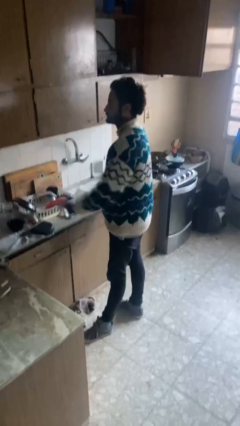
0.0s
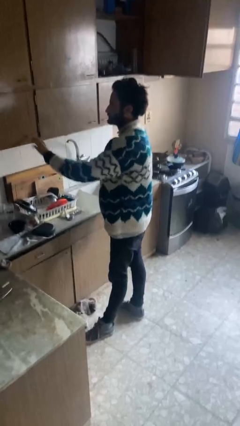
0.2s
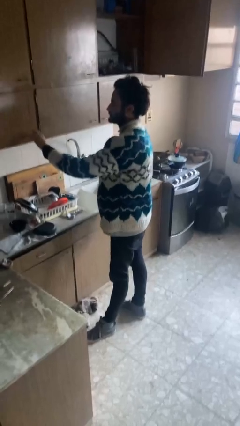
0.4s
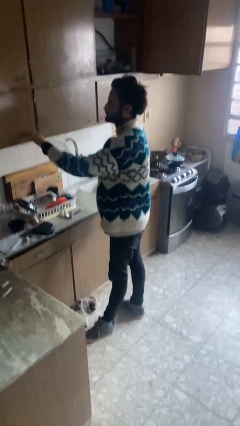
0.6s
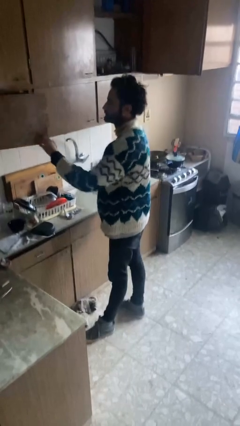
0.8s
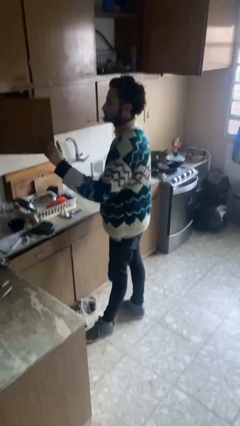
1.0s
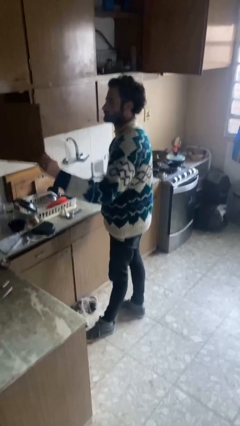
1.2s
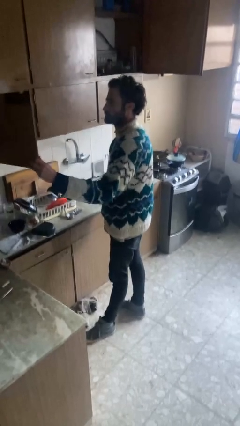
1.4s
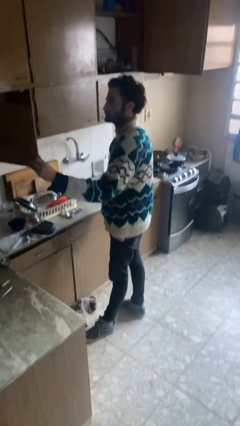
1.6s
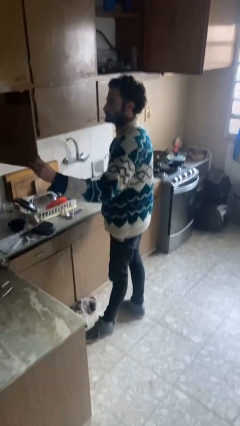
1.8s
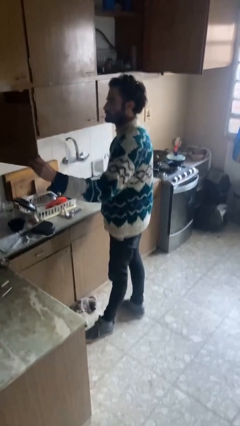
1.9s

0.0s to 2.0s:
person opens cabinet

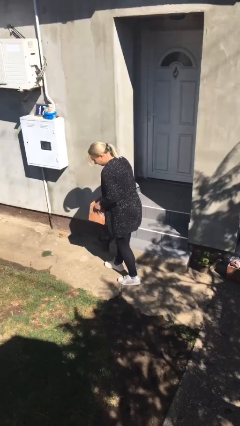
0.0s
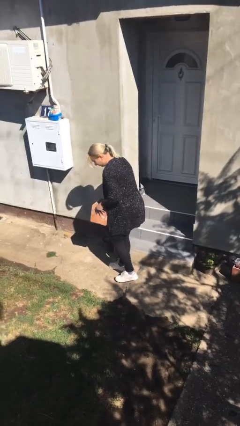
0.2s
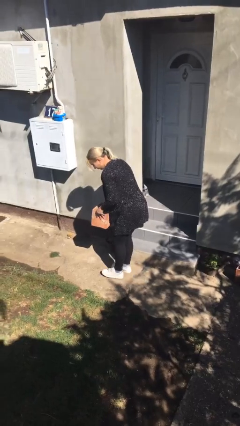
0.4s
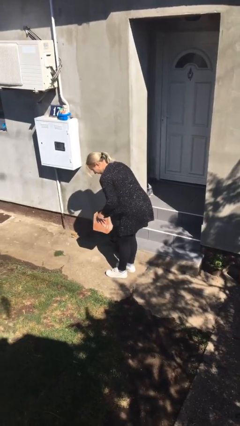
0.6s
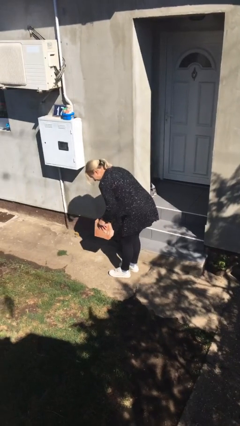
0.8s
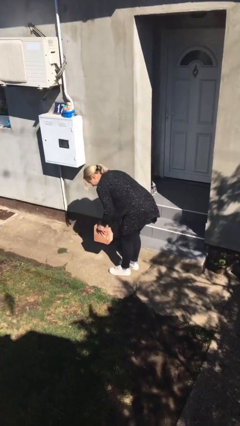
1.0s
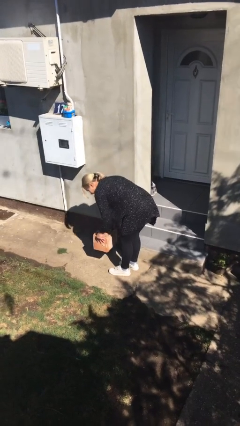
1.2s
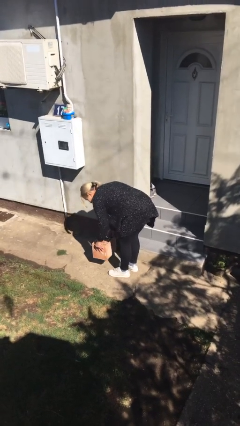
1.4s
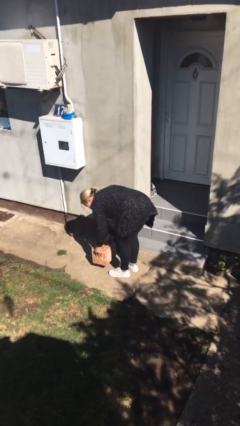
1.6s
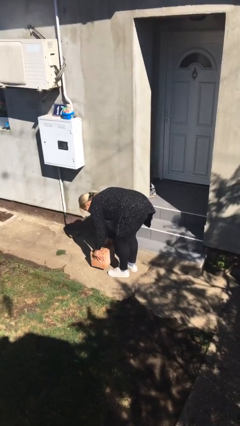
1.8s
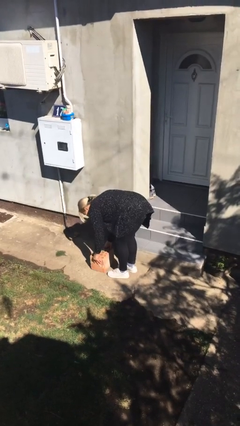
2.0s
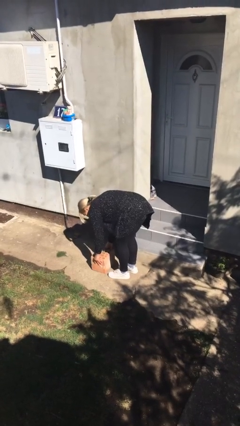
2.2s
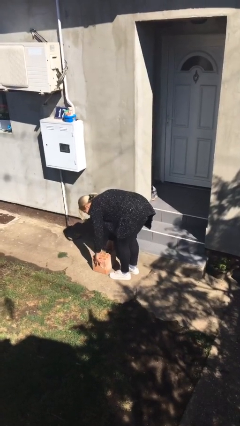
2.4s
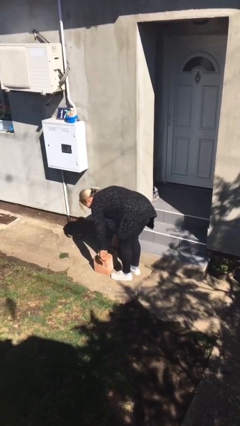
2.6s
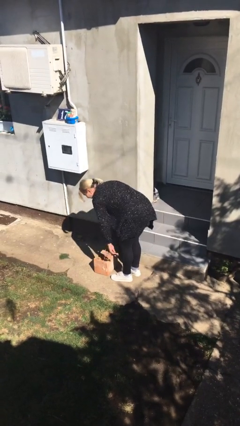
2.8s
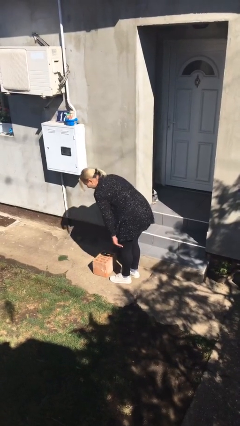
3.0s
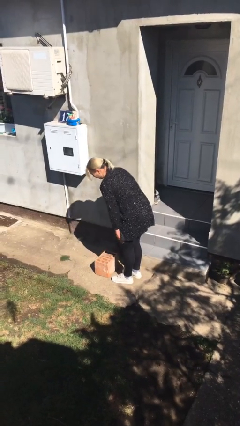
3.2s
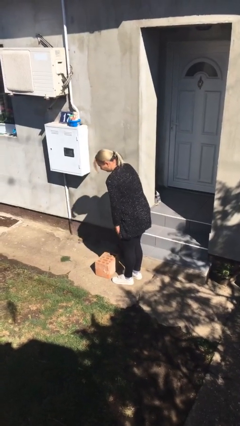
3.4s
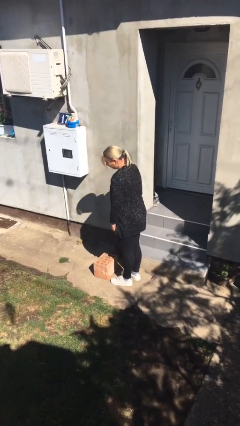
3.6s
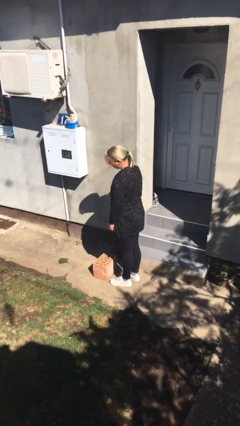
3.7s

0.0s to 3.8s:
person puts down object on floor

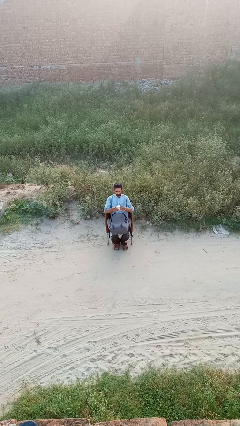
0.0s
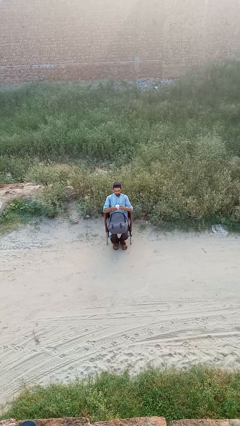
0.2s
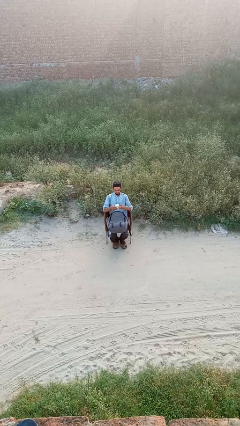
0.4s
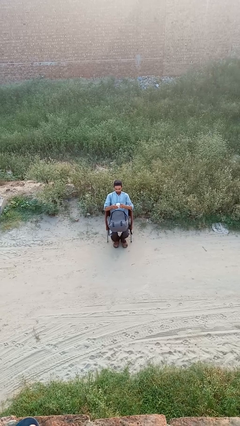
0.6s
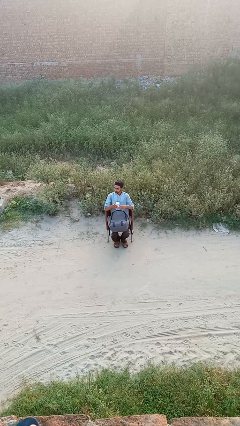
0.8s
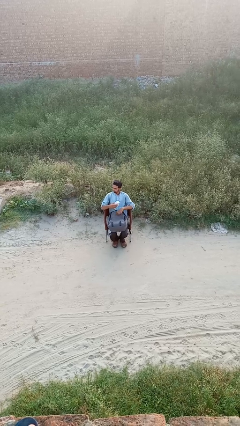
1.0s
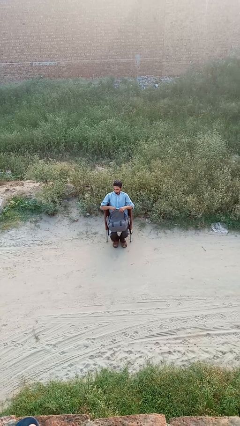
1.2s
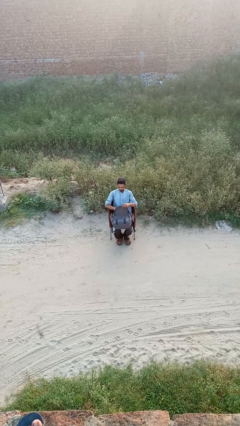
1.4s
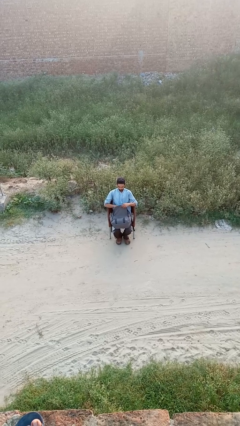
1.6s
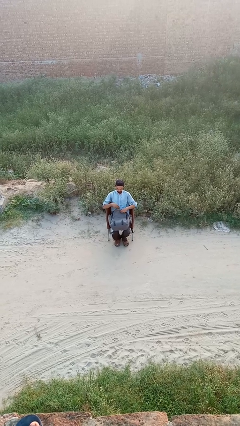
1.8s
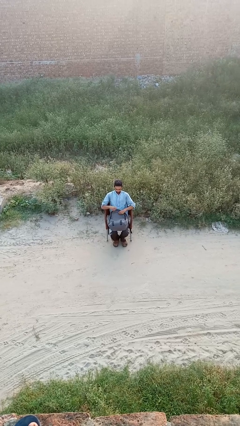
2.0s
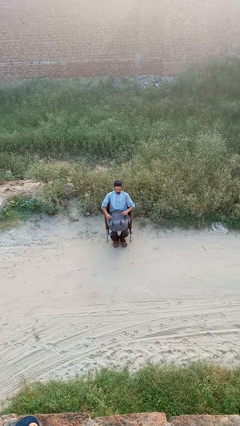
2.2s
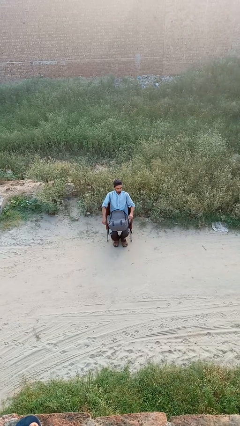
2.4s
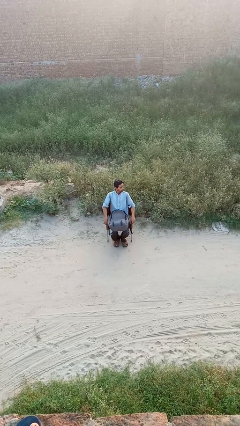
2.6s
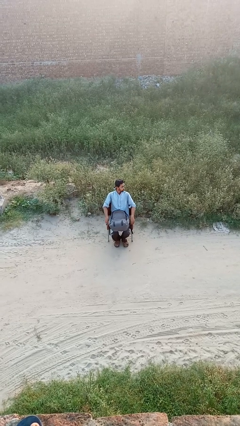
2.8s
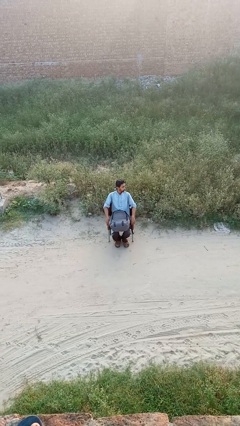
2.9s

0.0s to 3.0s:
person puts object into backpack

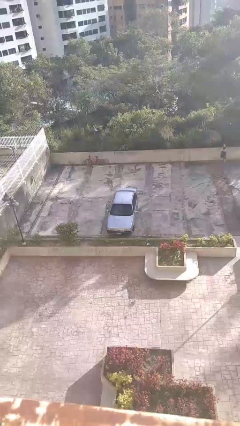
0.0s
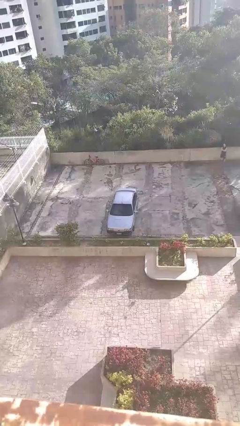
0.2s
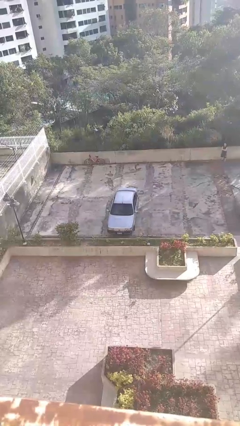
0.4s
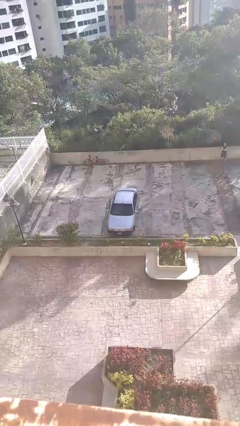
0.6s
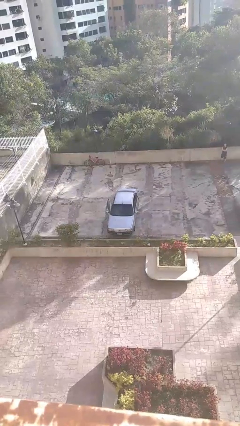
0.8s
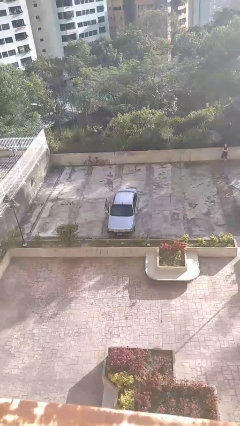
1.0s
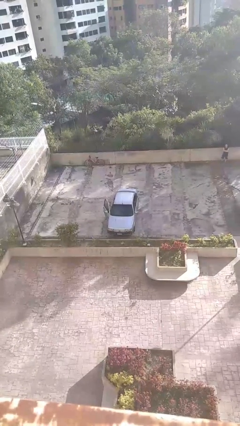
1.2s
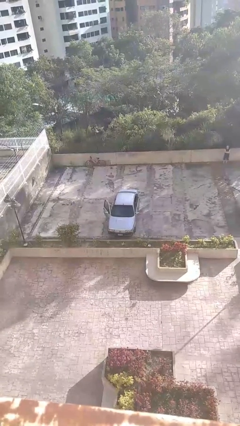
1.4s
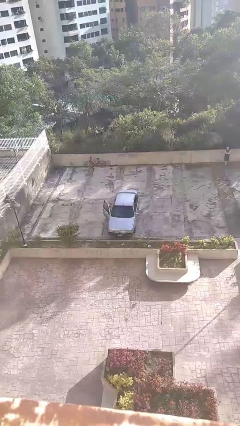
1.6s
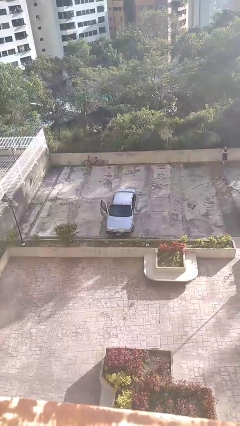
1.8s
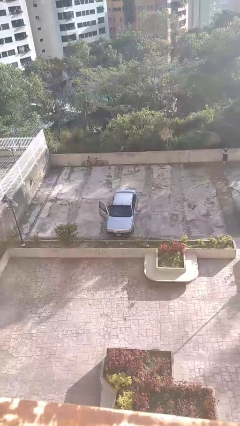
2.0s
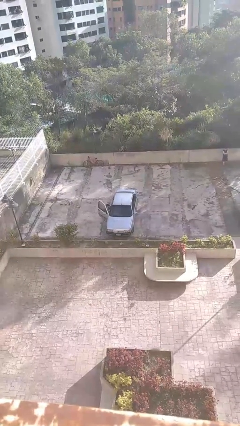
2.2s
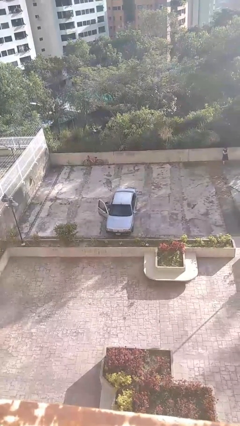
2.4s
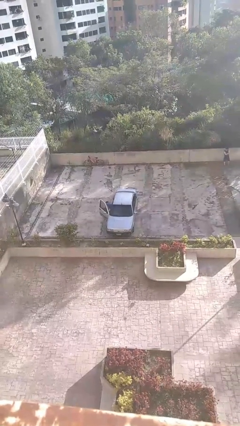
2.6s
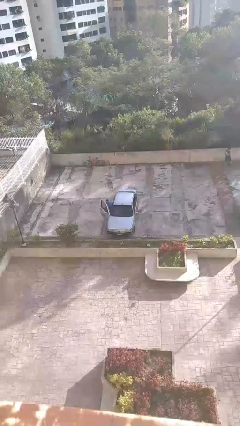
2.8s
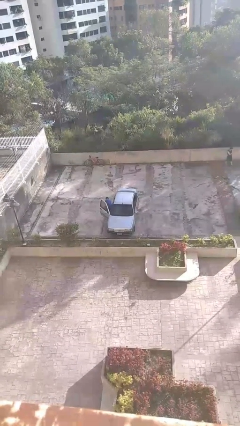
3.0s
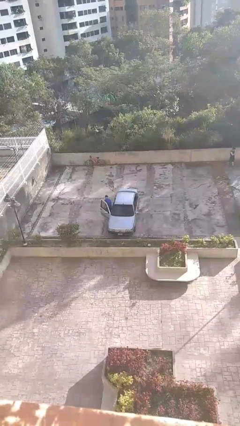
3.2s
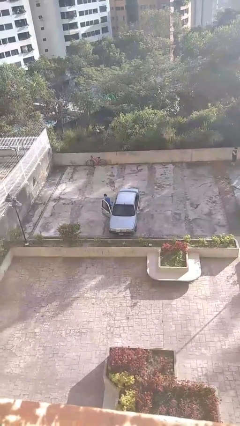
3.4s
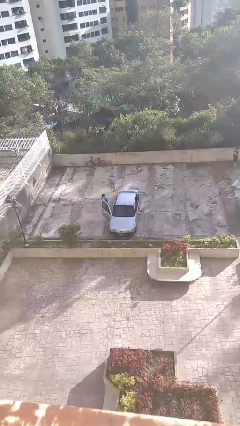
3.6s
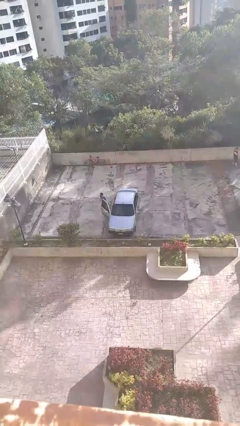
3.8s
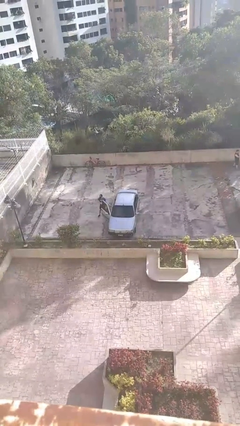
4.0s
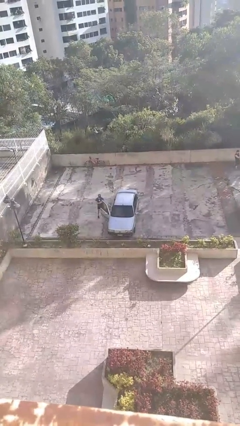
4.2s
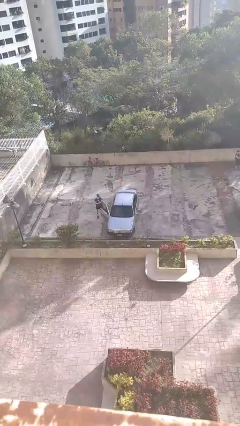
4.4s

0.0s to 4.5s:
car drops off person

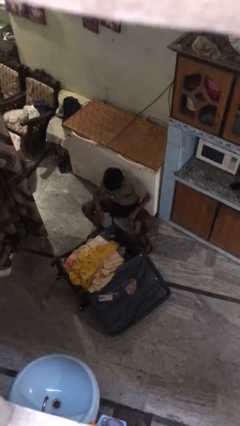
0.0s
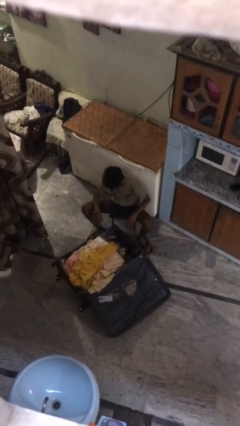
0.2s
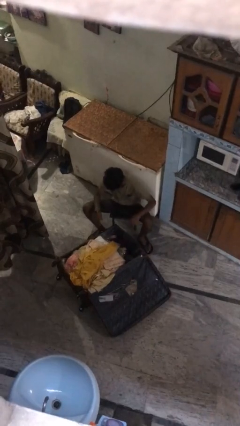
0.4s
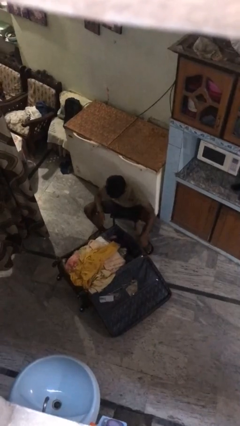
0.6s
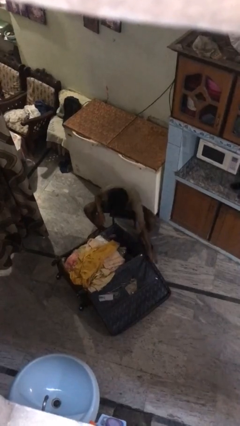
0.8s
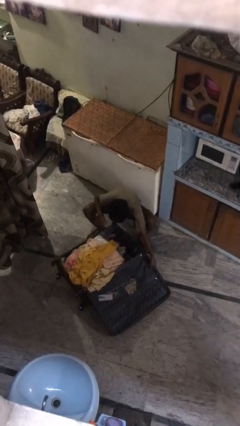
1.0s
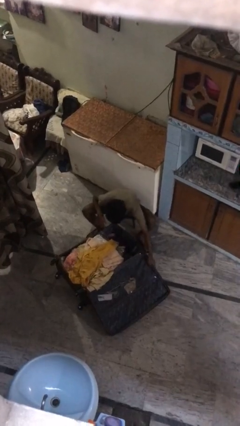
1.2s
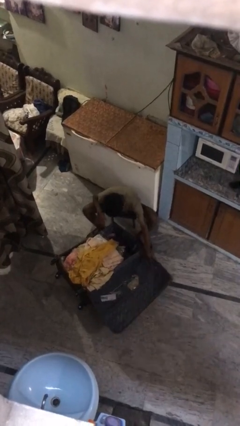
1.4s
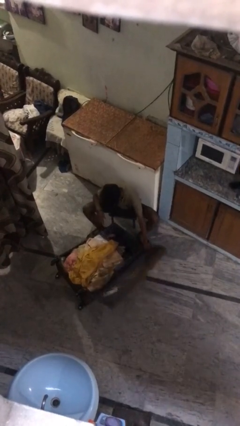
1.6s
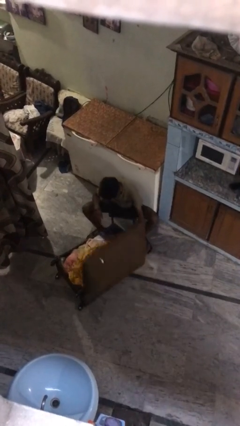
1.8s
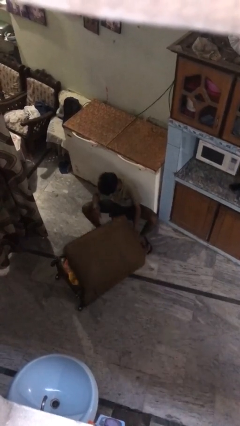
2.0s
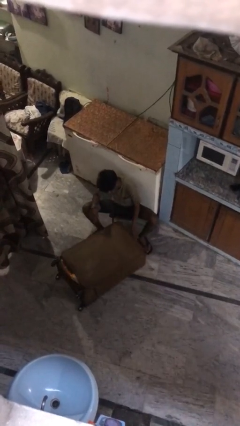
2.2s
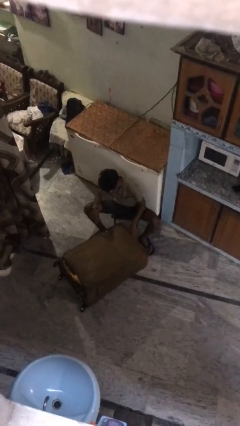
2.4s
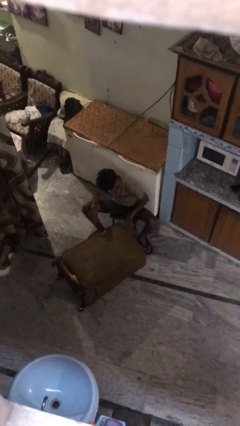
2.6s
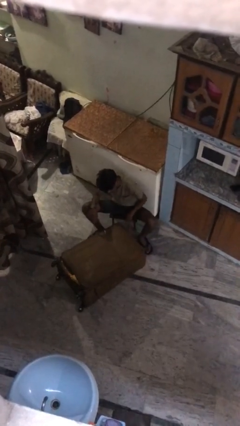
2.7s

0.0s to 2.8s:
person closes suitcase

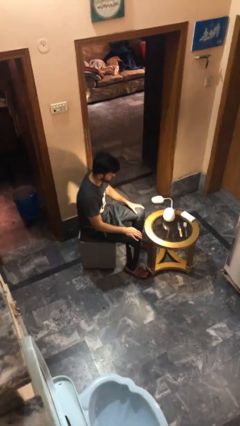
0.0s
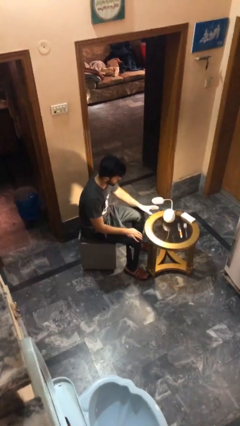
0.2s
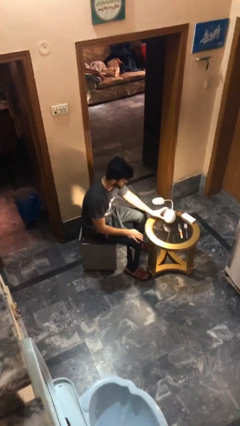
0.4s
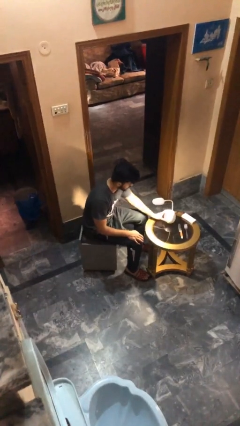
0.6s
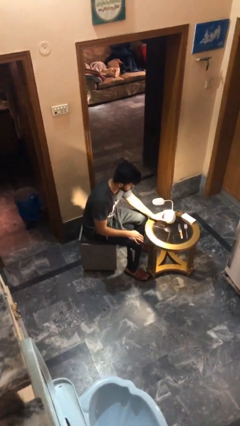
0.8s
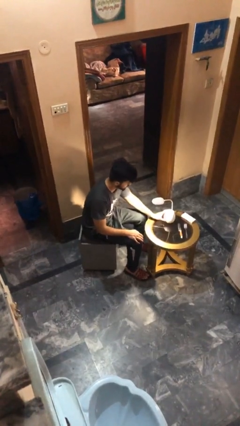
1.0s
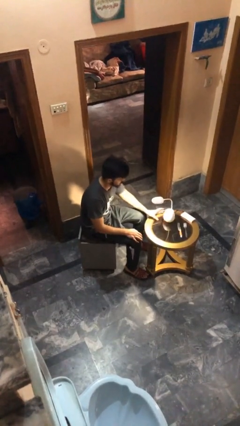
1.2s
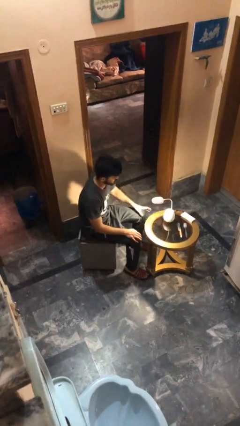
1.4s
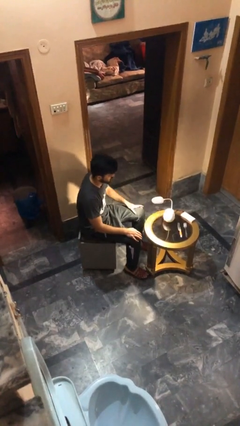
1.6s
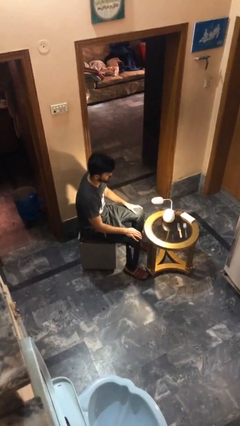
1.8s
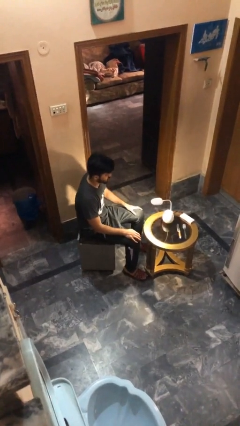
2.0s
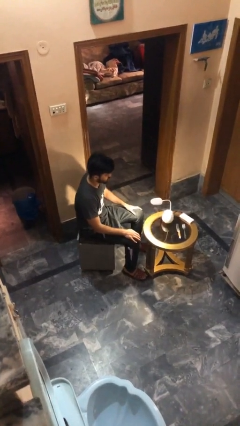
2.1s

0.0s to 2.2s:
person turns off lamp
